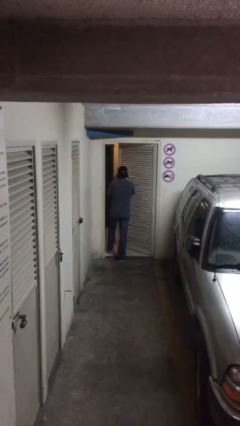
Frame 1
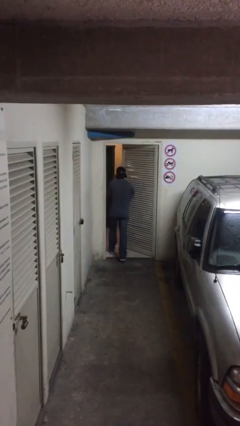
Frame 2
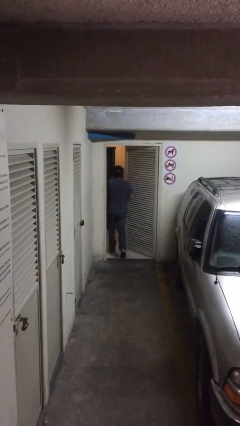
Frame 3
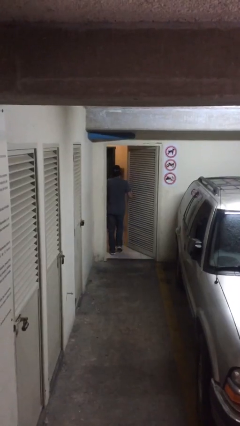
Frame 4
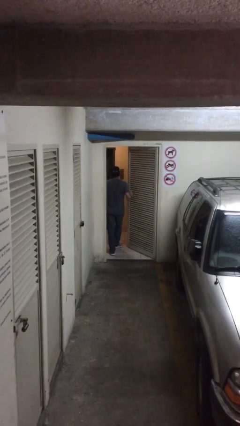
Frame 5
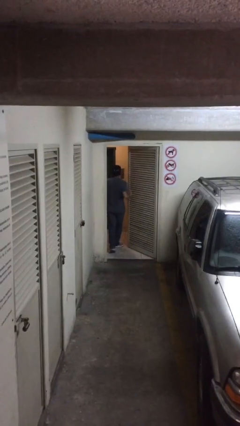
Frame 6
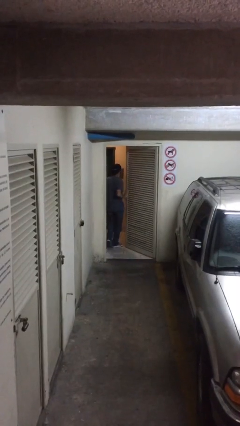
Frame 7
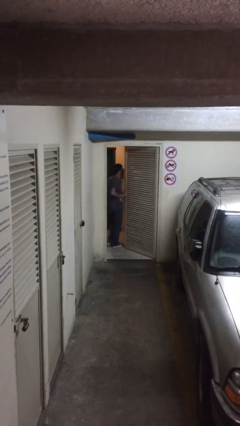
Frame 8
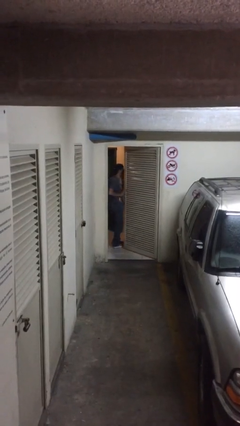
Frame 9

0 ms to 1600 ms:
person exits scene through structure

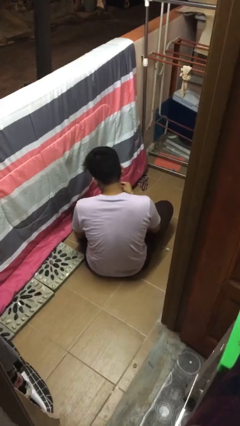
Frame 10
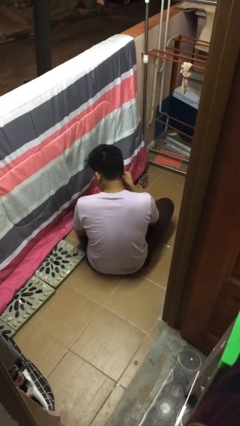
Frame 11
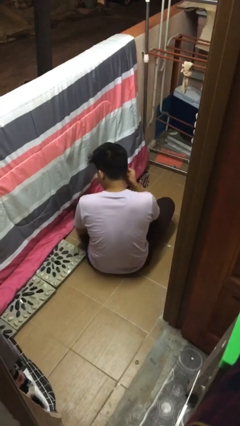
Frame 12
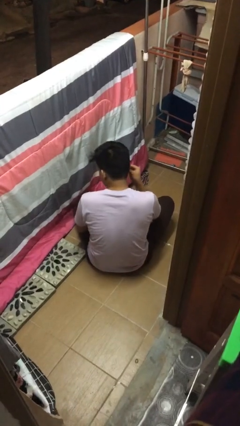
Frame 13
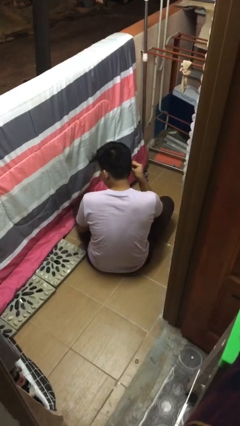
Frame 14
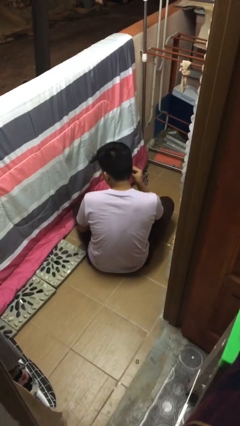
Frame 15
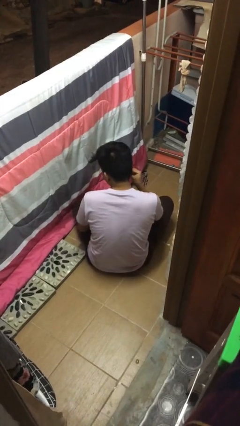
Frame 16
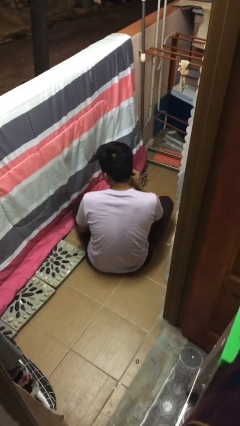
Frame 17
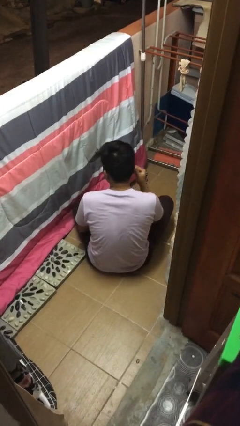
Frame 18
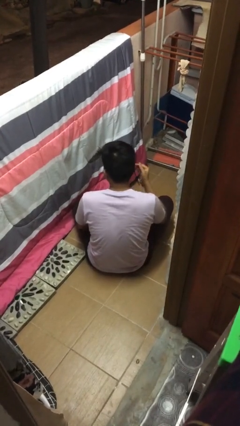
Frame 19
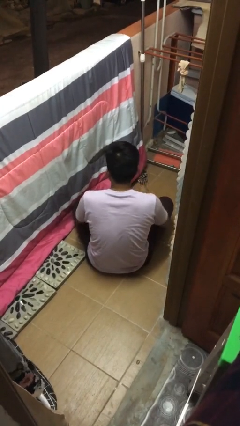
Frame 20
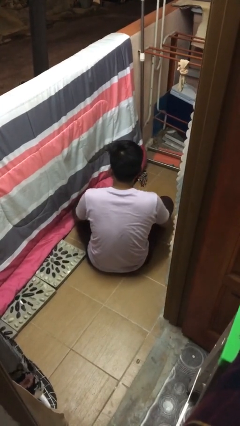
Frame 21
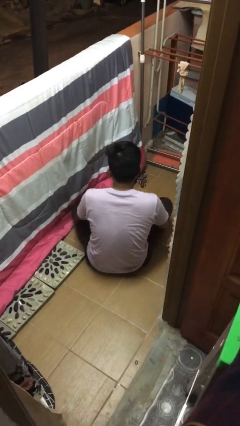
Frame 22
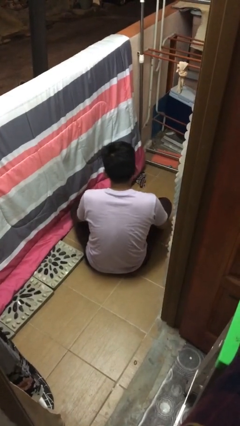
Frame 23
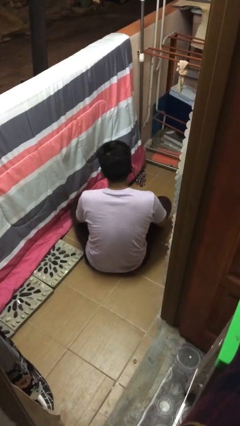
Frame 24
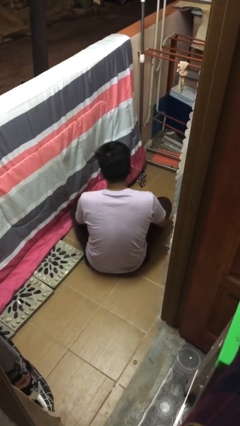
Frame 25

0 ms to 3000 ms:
person puts on earrings

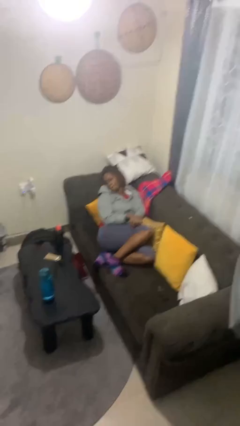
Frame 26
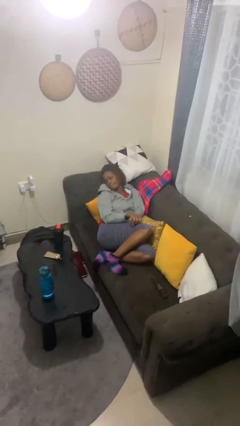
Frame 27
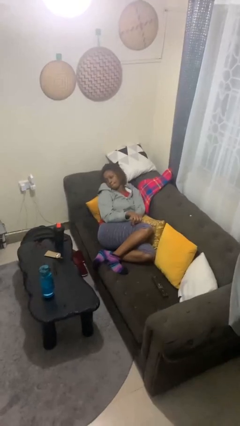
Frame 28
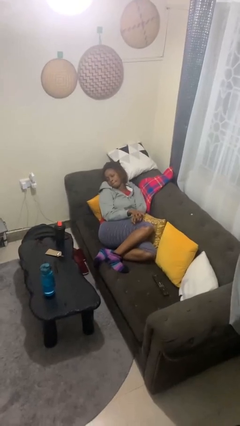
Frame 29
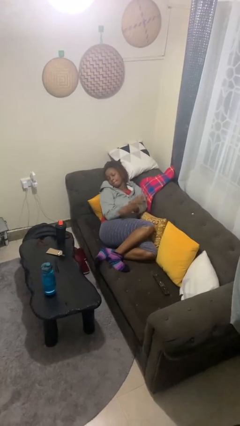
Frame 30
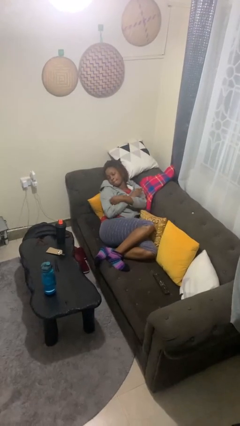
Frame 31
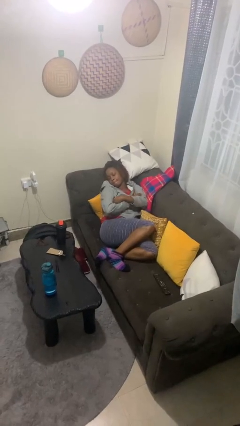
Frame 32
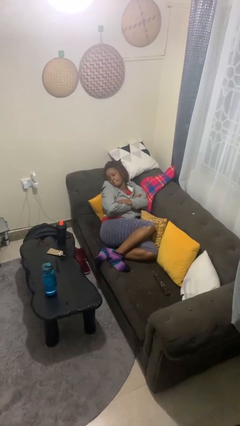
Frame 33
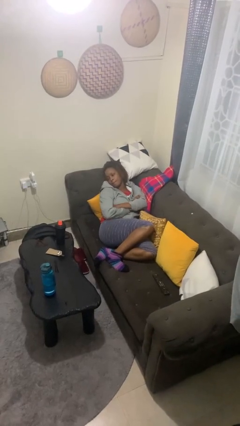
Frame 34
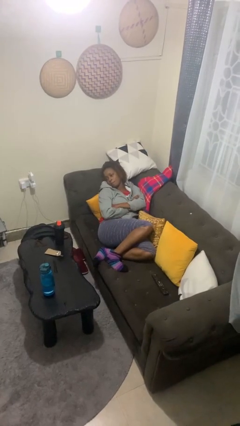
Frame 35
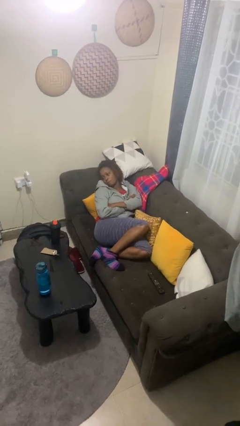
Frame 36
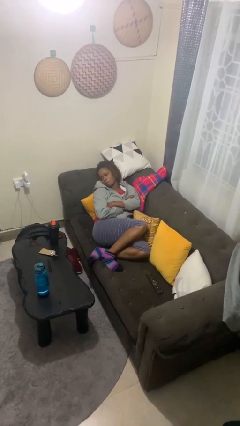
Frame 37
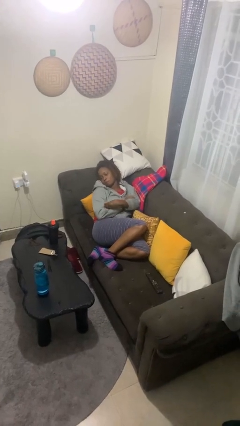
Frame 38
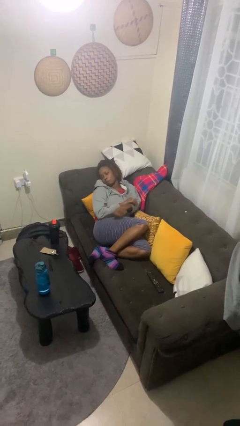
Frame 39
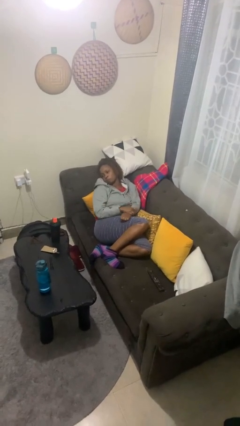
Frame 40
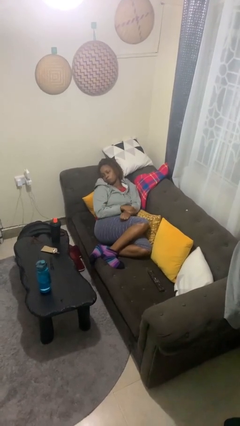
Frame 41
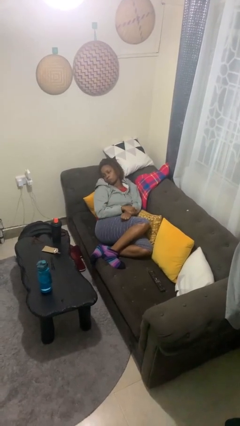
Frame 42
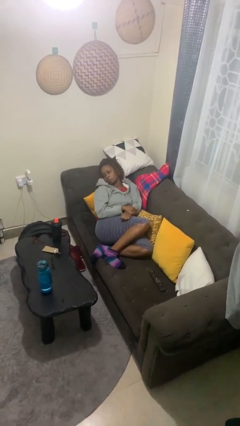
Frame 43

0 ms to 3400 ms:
person crosses arms

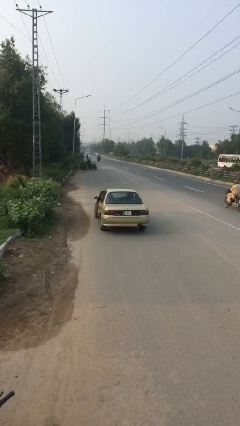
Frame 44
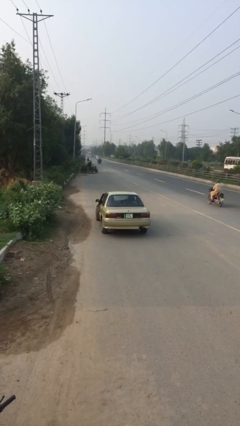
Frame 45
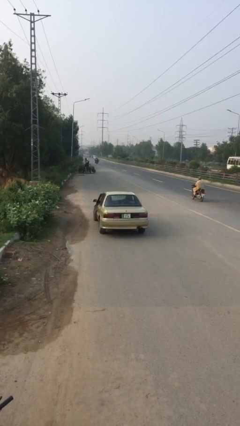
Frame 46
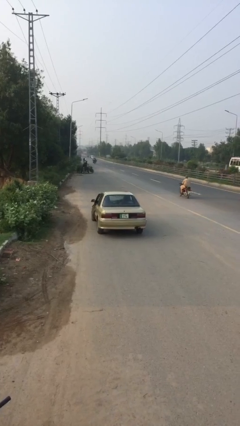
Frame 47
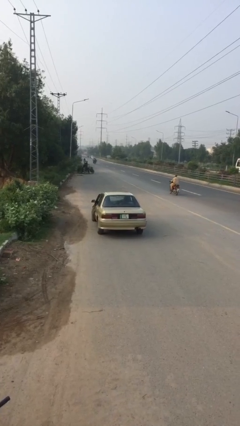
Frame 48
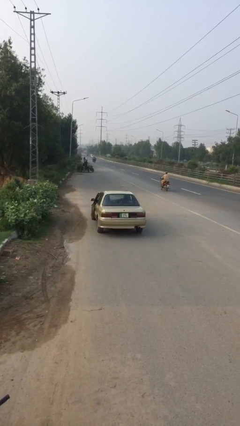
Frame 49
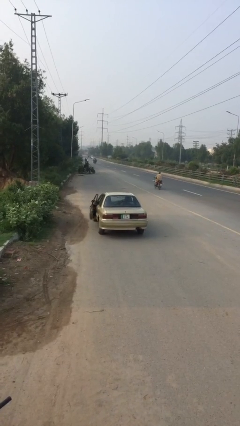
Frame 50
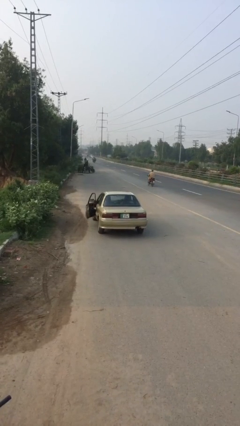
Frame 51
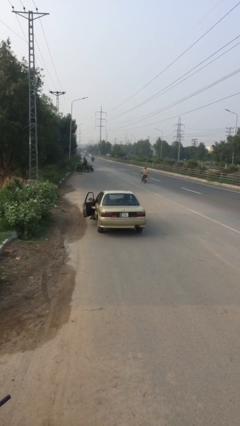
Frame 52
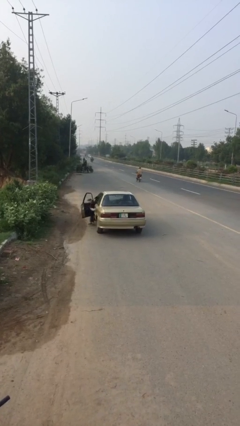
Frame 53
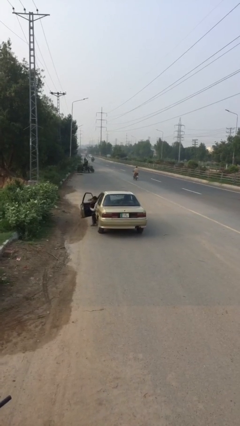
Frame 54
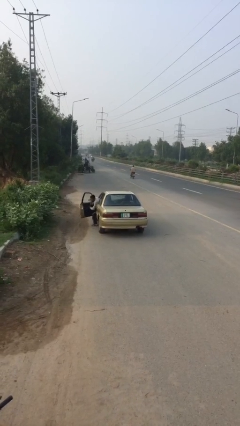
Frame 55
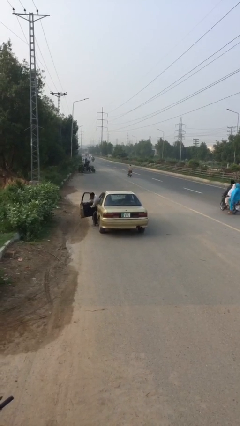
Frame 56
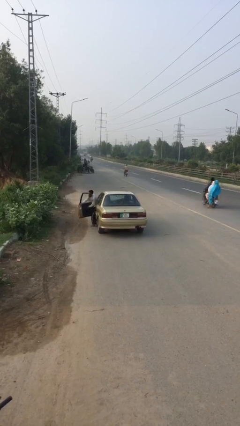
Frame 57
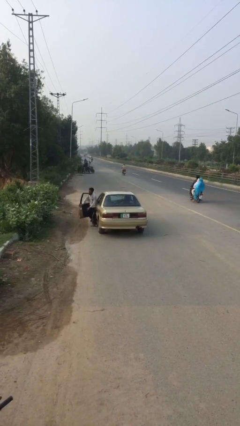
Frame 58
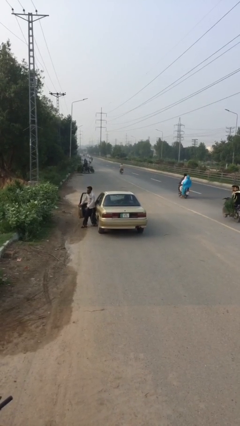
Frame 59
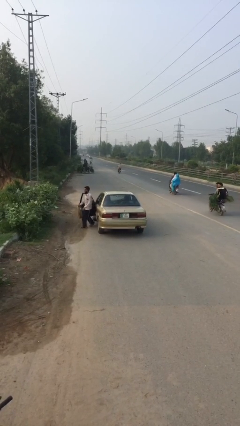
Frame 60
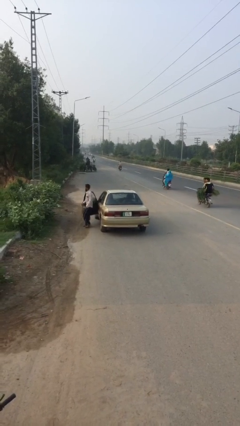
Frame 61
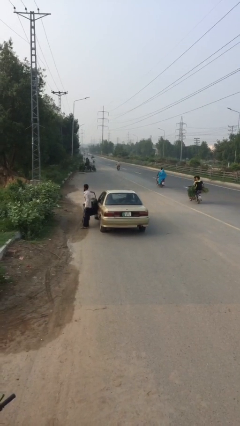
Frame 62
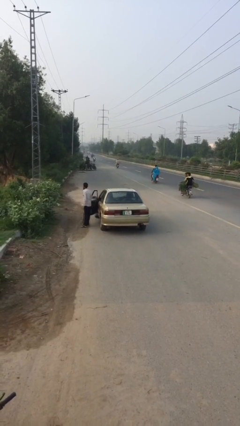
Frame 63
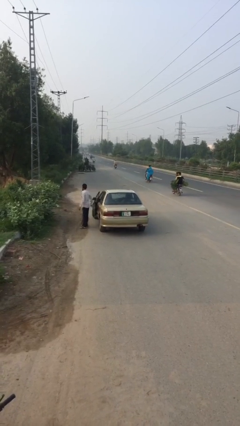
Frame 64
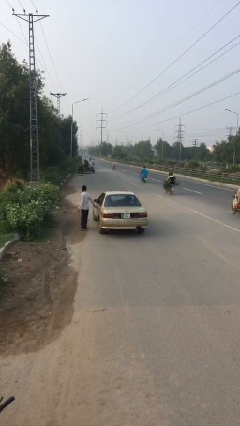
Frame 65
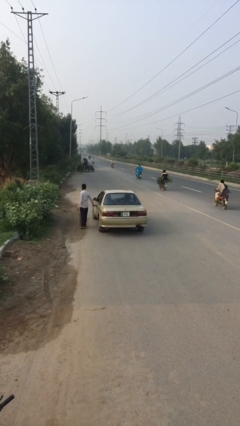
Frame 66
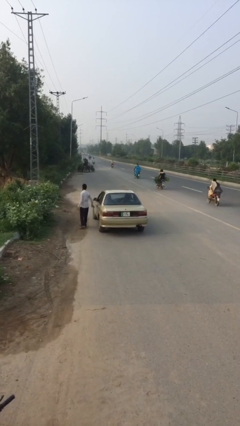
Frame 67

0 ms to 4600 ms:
car drops off person

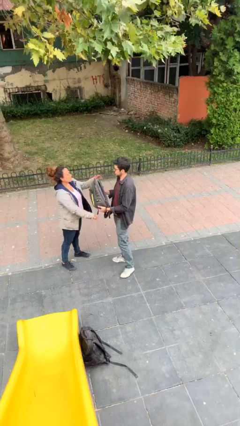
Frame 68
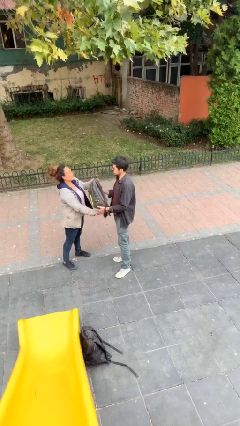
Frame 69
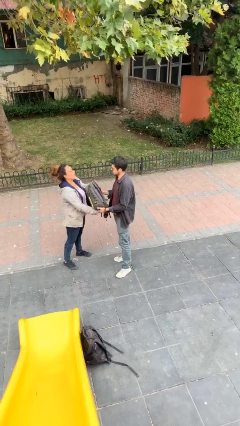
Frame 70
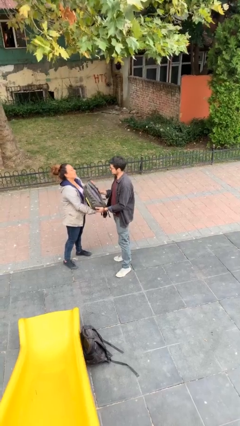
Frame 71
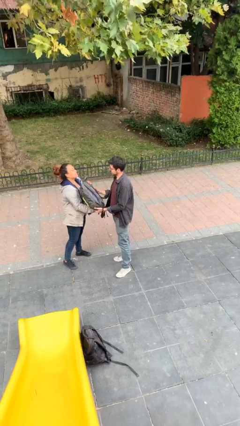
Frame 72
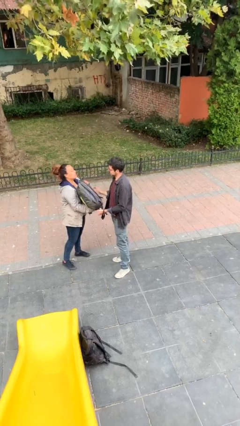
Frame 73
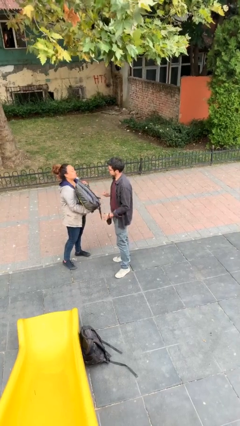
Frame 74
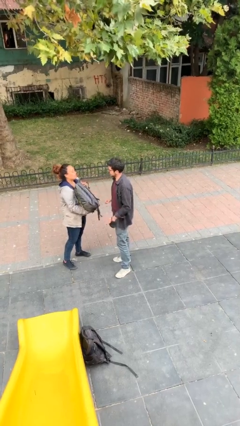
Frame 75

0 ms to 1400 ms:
person transfers object to person

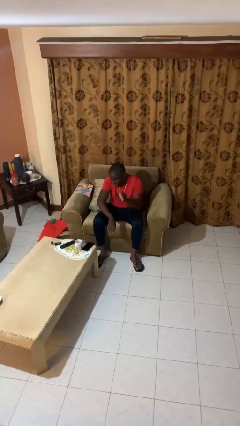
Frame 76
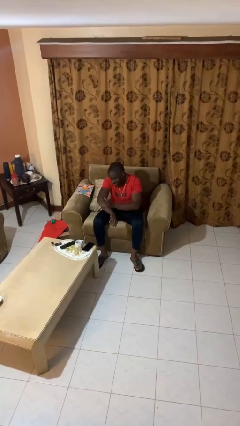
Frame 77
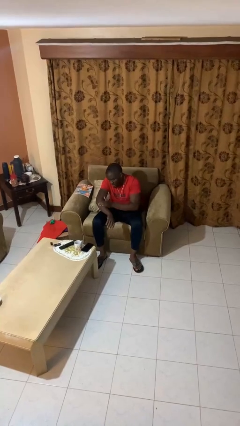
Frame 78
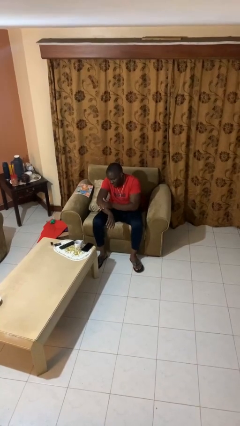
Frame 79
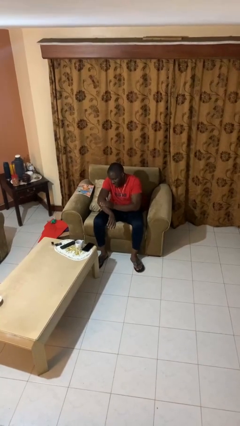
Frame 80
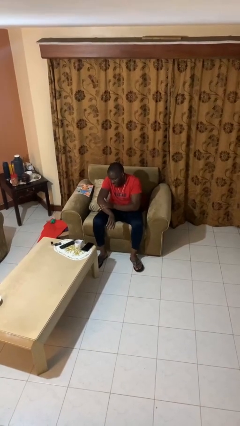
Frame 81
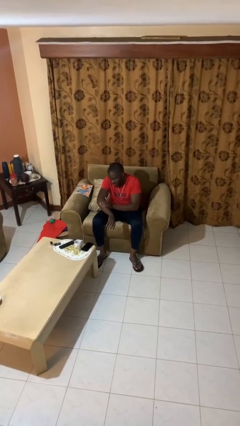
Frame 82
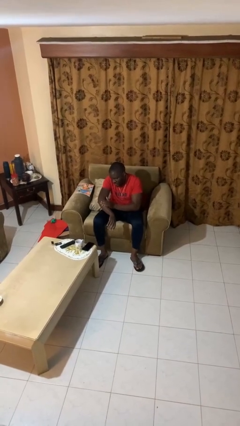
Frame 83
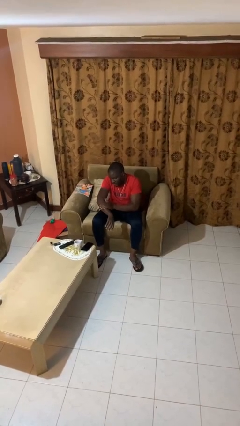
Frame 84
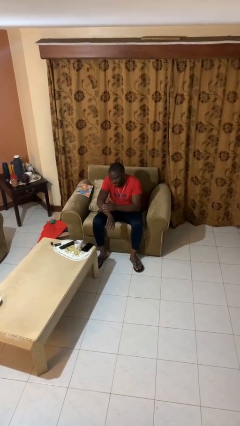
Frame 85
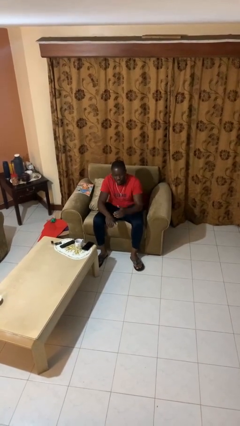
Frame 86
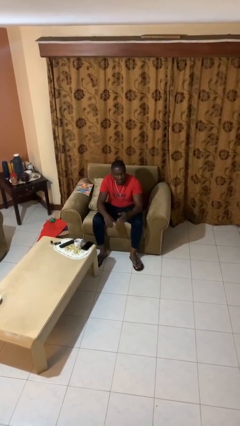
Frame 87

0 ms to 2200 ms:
person swats bug

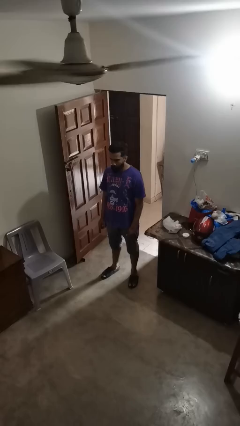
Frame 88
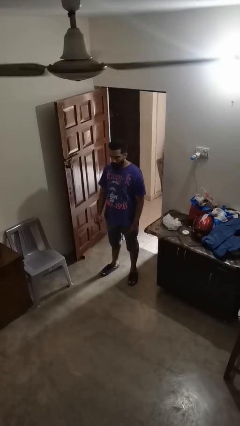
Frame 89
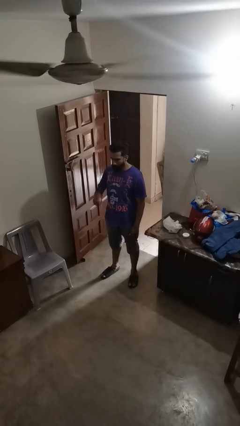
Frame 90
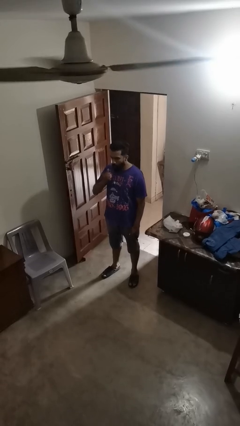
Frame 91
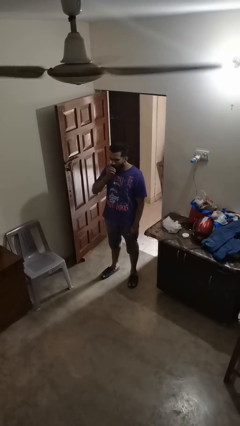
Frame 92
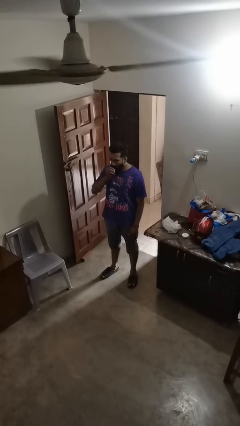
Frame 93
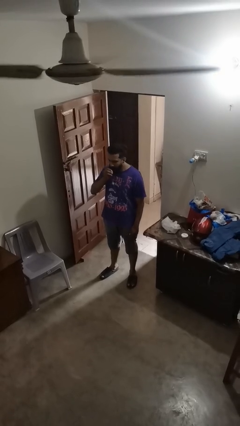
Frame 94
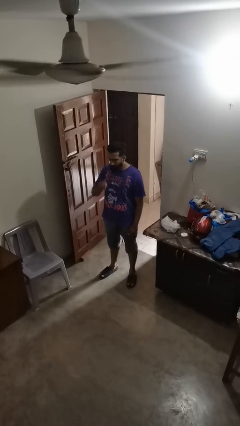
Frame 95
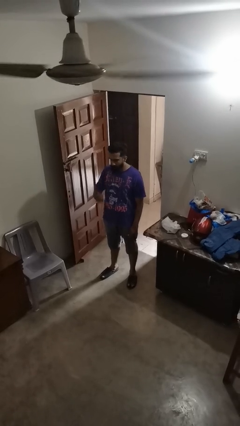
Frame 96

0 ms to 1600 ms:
person eats apple
